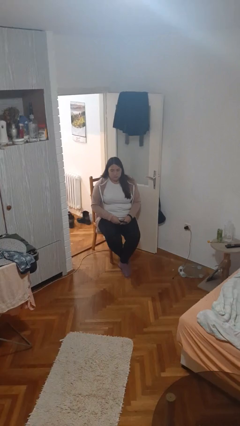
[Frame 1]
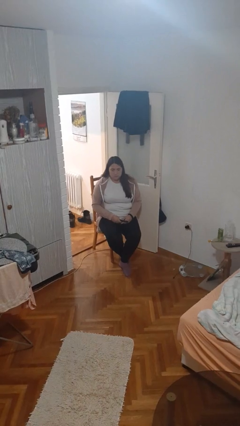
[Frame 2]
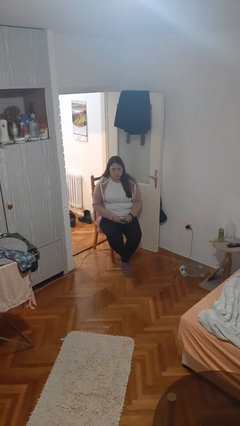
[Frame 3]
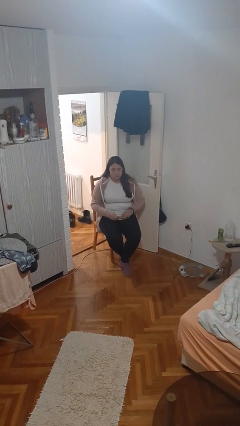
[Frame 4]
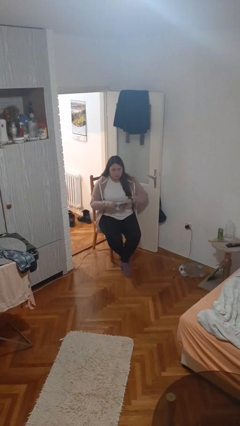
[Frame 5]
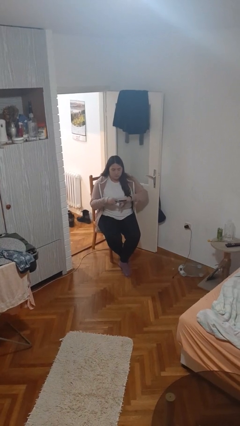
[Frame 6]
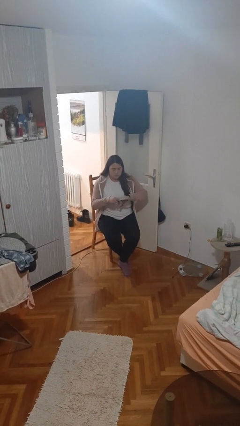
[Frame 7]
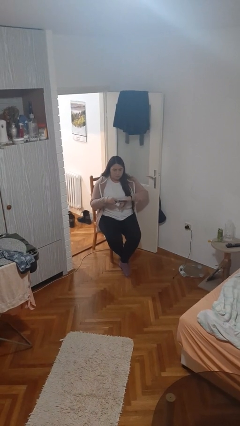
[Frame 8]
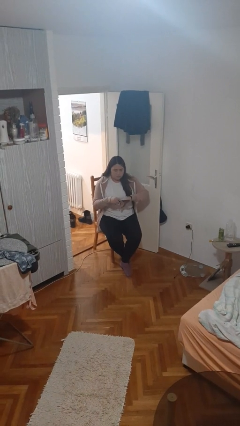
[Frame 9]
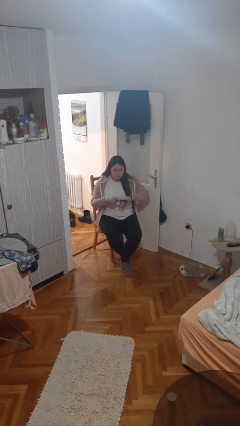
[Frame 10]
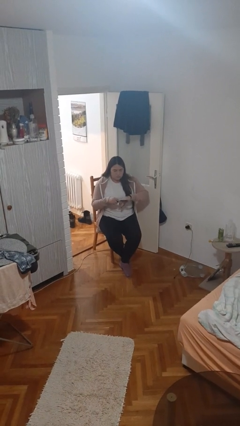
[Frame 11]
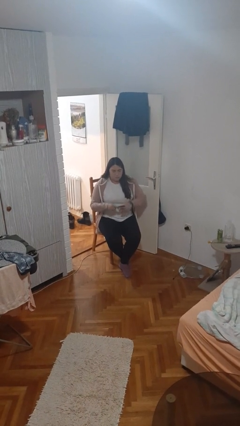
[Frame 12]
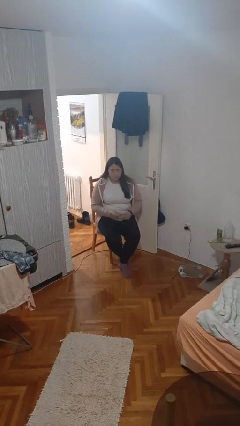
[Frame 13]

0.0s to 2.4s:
person files fingernails

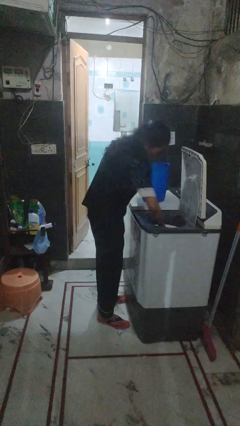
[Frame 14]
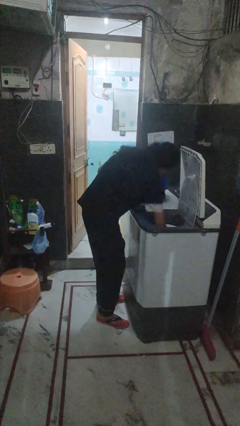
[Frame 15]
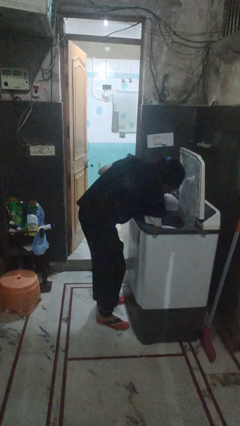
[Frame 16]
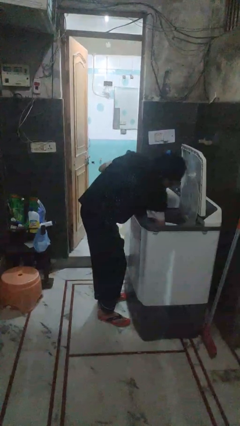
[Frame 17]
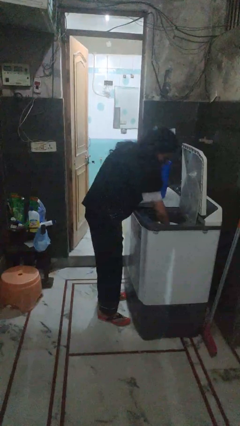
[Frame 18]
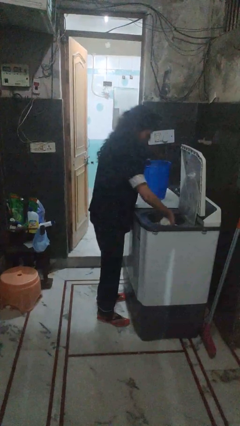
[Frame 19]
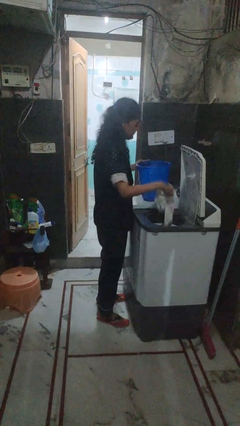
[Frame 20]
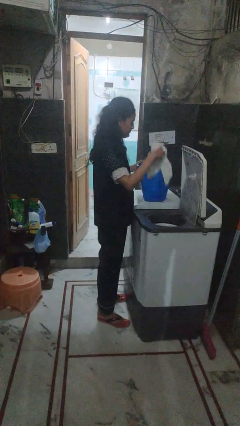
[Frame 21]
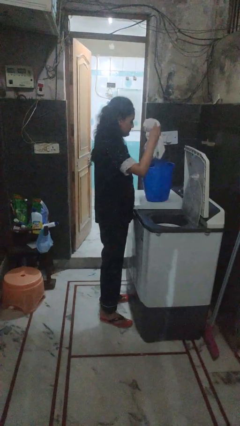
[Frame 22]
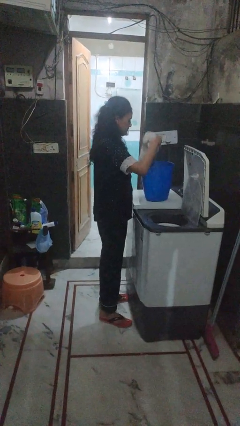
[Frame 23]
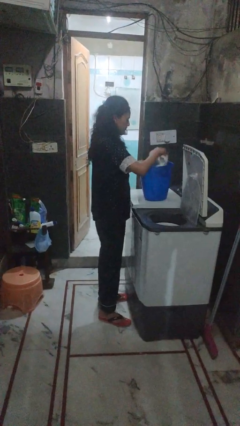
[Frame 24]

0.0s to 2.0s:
person unloads dryer

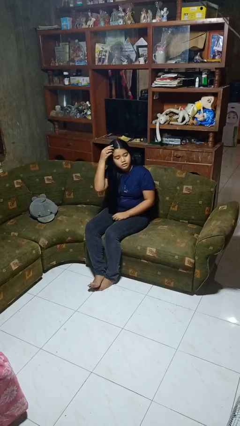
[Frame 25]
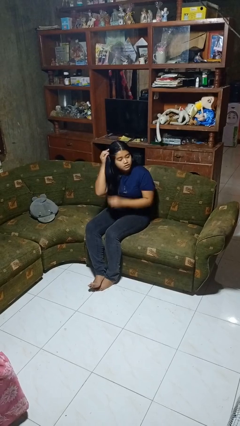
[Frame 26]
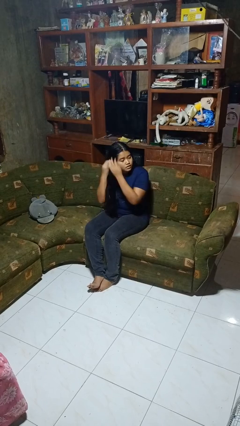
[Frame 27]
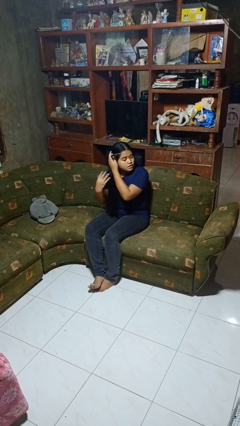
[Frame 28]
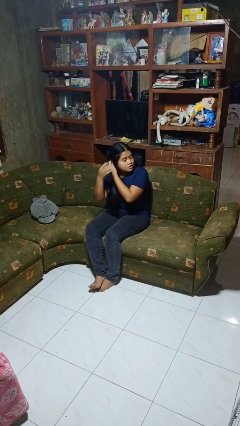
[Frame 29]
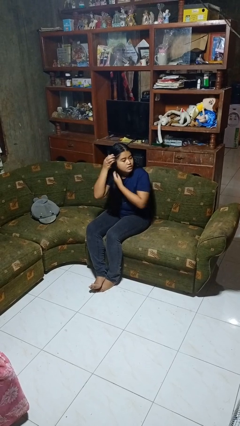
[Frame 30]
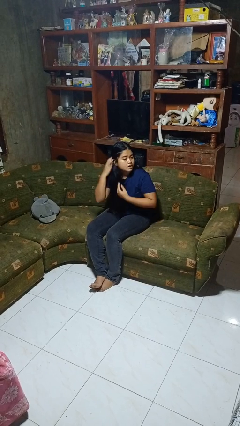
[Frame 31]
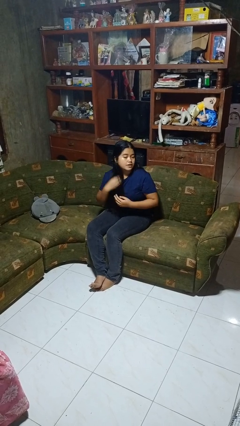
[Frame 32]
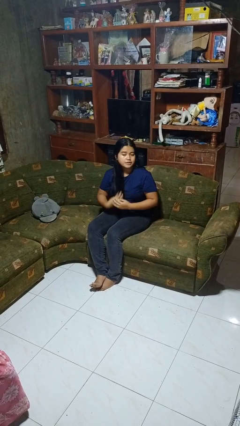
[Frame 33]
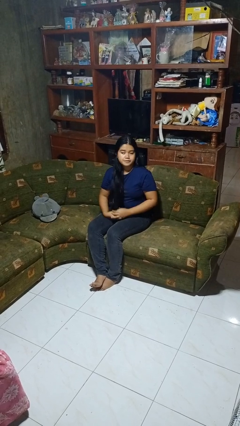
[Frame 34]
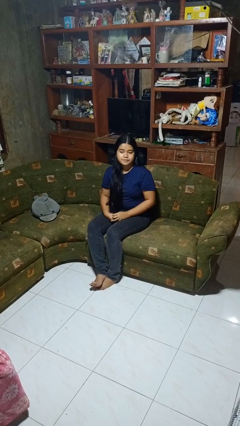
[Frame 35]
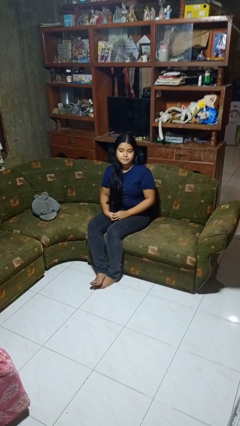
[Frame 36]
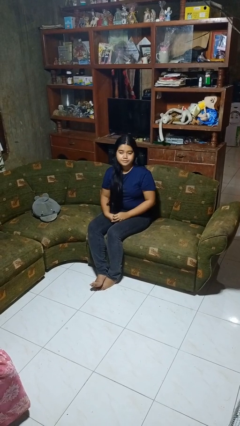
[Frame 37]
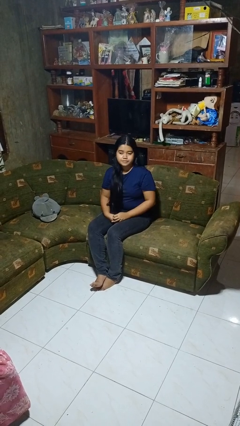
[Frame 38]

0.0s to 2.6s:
person strokes hair

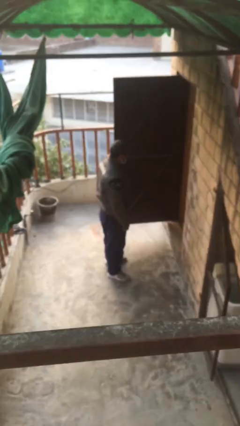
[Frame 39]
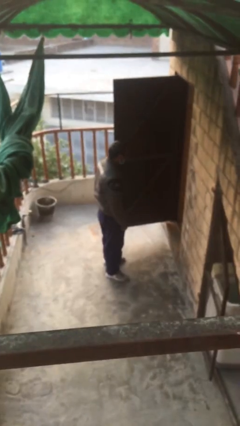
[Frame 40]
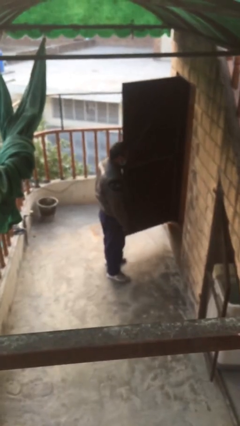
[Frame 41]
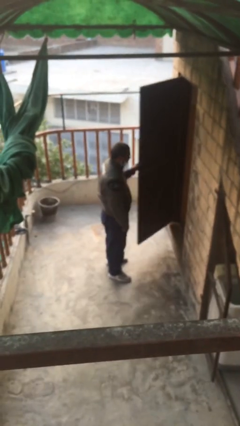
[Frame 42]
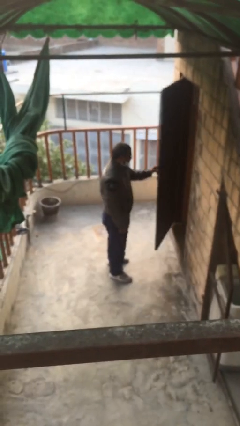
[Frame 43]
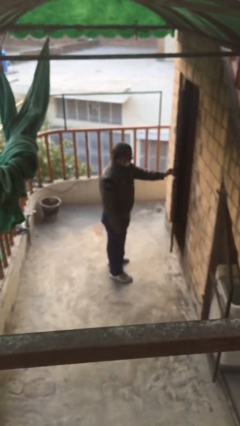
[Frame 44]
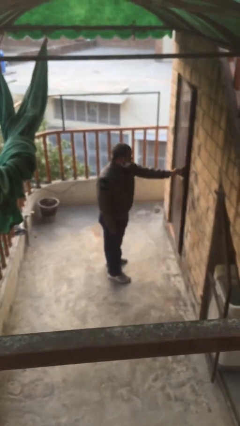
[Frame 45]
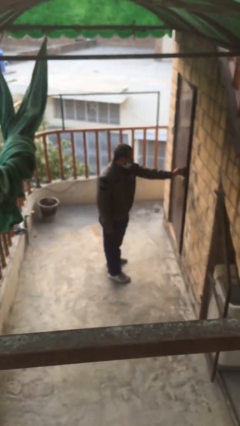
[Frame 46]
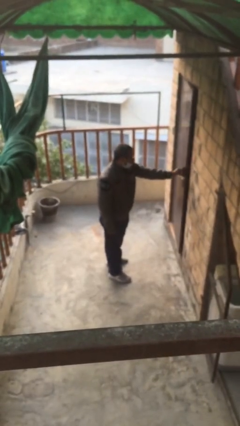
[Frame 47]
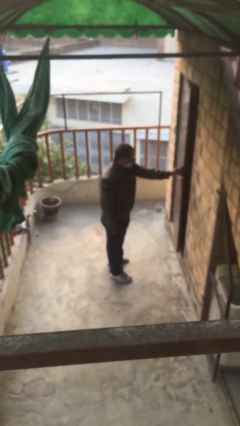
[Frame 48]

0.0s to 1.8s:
person closes facility door

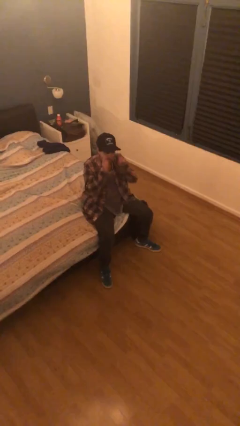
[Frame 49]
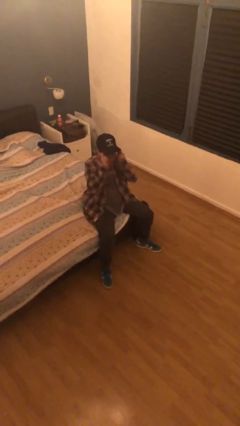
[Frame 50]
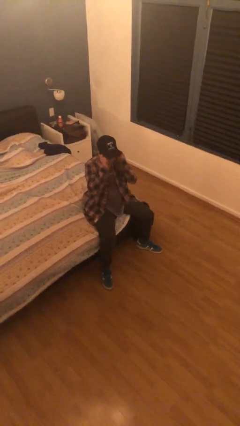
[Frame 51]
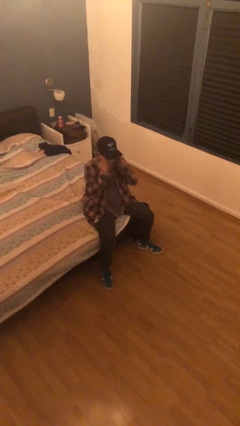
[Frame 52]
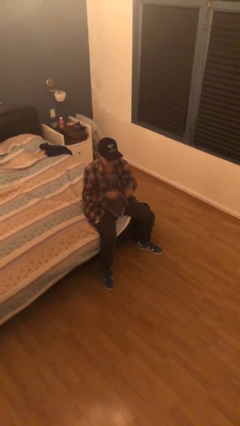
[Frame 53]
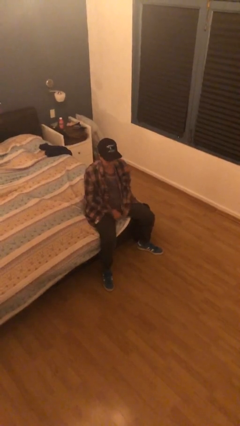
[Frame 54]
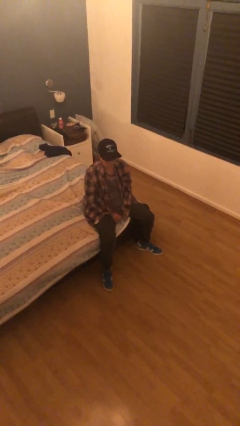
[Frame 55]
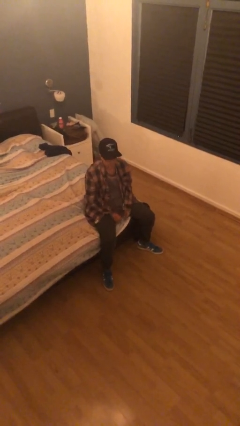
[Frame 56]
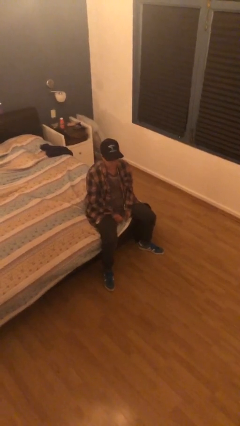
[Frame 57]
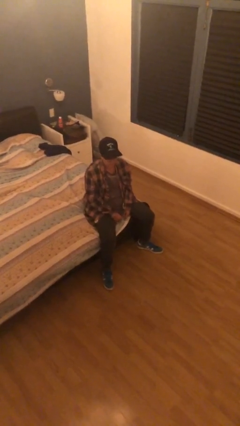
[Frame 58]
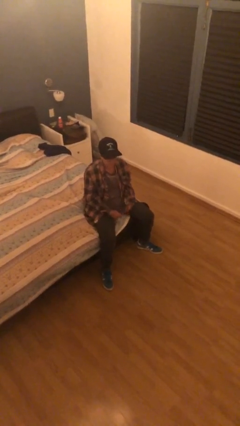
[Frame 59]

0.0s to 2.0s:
person puts on glasses

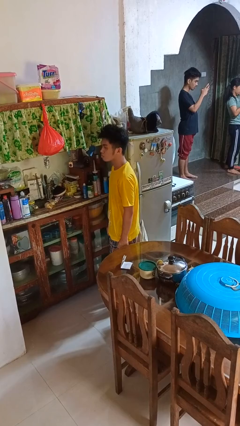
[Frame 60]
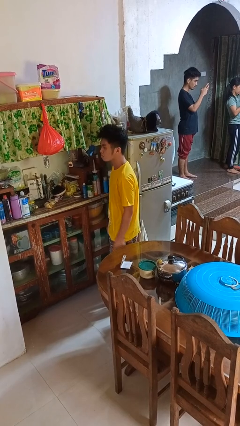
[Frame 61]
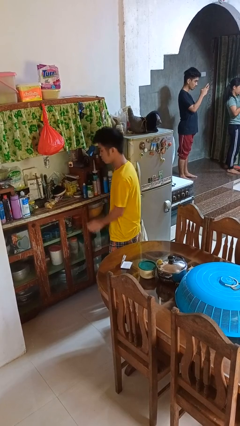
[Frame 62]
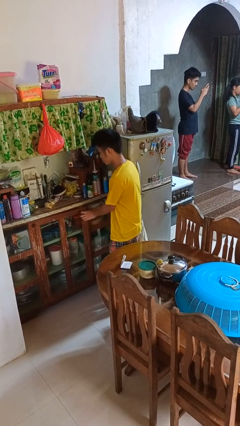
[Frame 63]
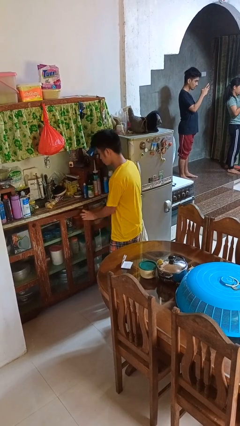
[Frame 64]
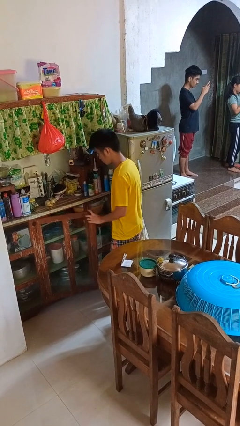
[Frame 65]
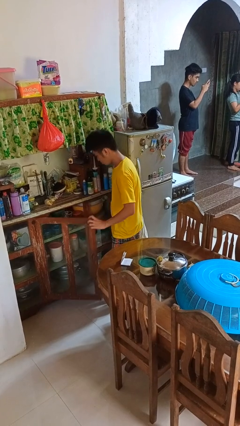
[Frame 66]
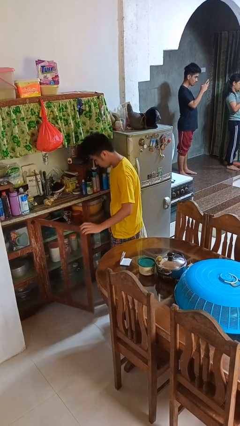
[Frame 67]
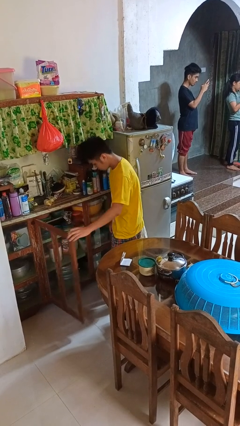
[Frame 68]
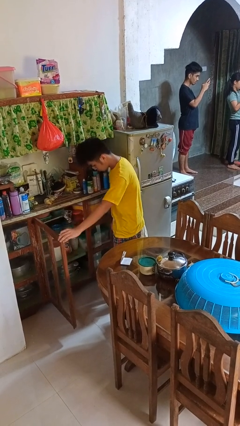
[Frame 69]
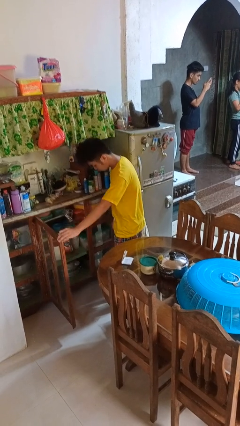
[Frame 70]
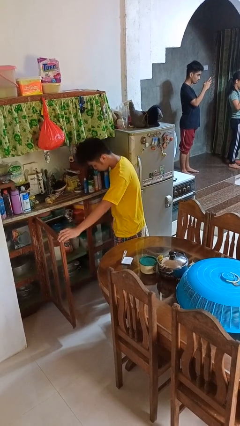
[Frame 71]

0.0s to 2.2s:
person opens cabinet

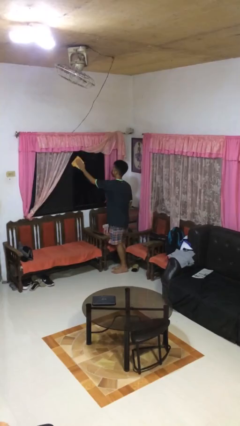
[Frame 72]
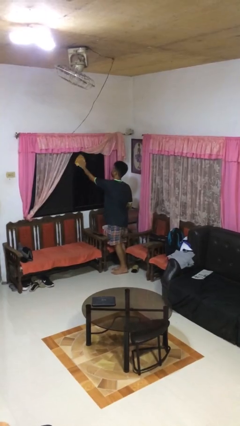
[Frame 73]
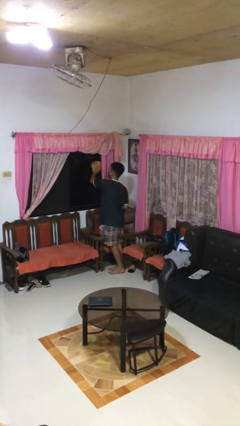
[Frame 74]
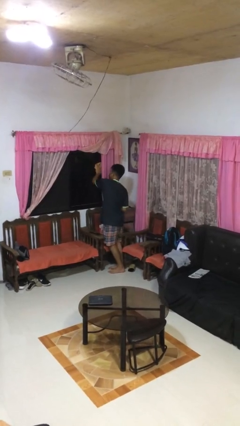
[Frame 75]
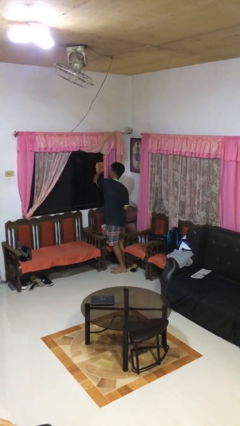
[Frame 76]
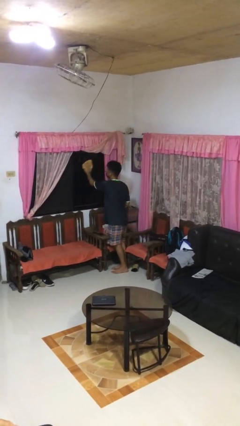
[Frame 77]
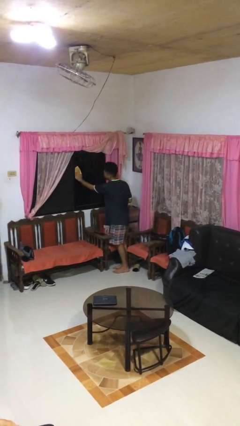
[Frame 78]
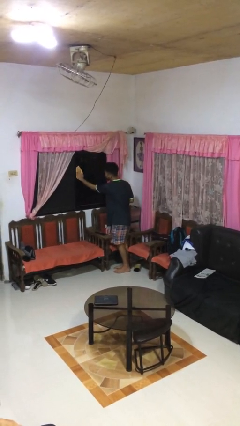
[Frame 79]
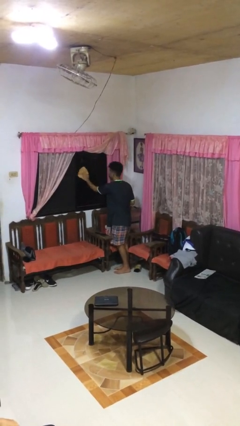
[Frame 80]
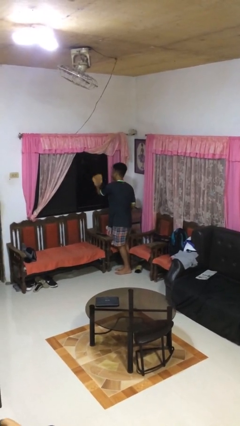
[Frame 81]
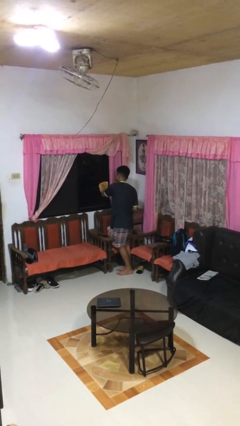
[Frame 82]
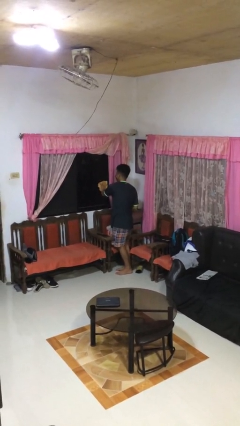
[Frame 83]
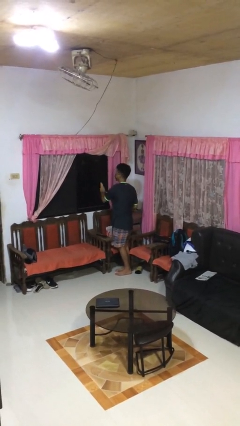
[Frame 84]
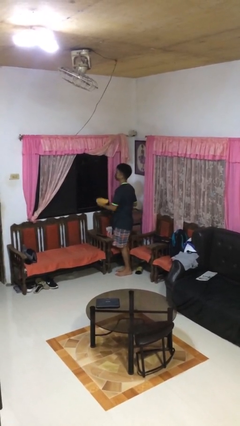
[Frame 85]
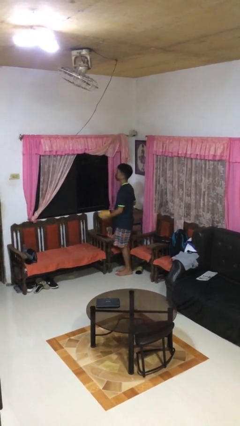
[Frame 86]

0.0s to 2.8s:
person washes window

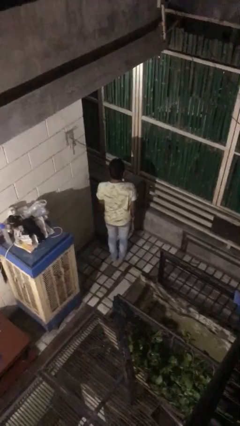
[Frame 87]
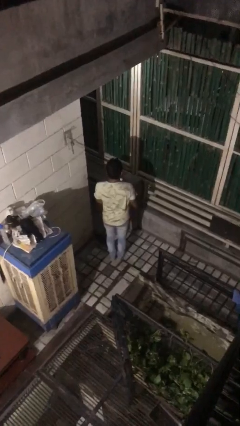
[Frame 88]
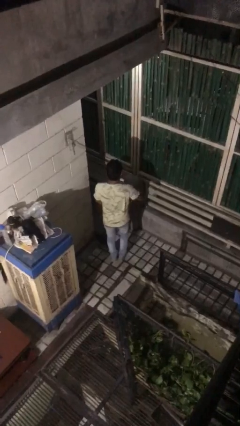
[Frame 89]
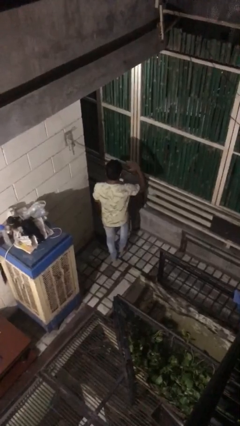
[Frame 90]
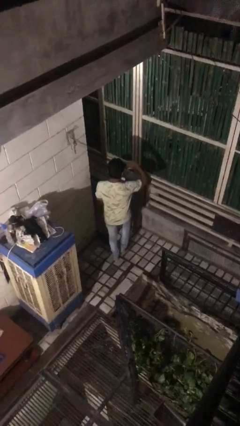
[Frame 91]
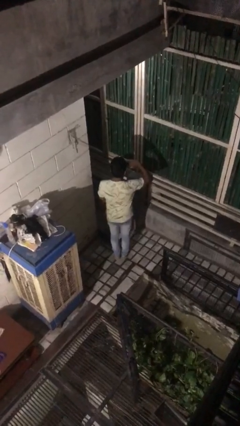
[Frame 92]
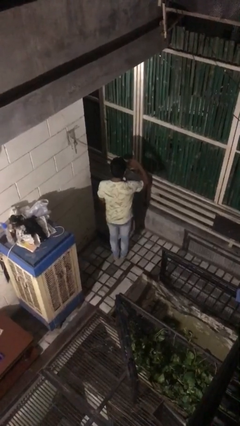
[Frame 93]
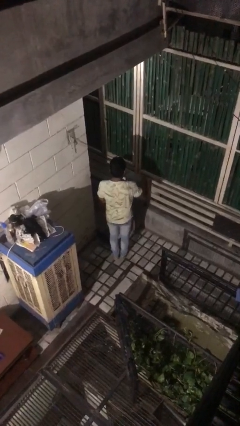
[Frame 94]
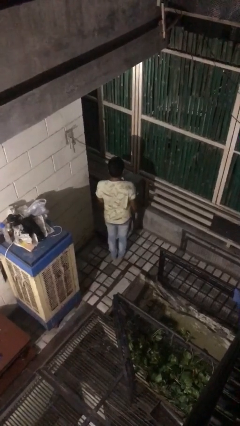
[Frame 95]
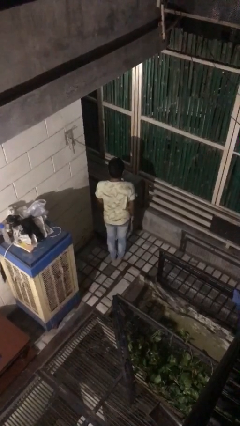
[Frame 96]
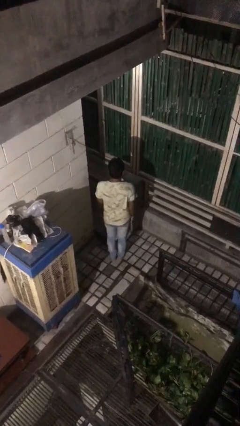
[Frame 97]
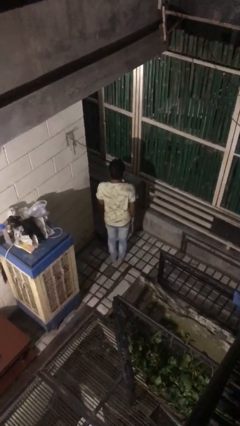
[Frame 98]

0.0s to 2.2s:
person salutes
